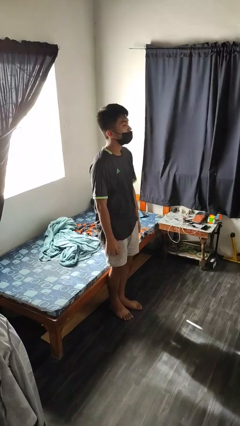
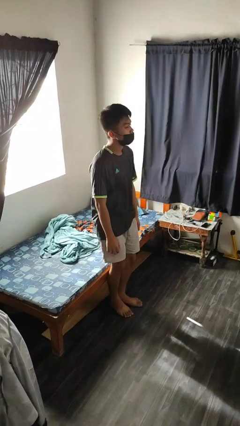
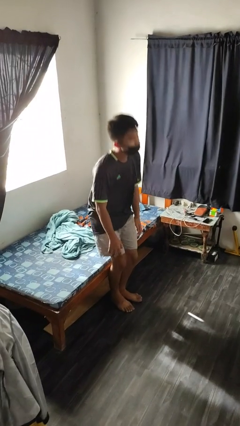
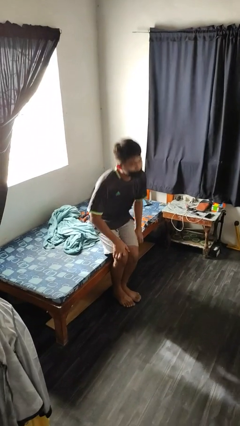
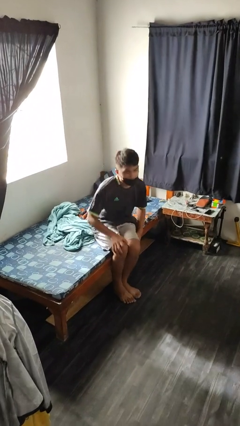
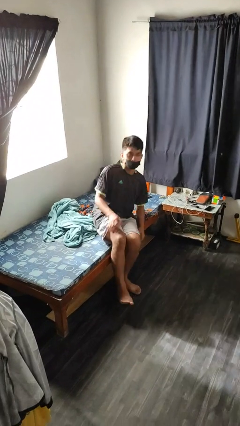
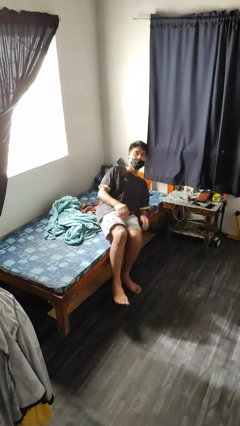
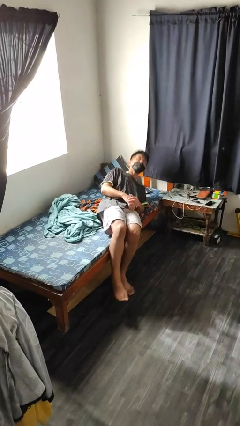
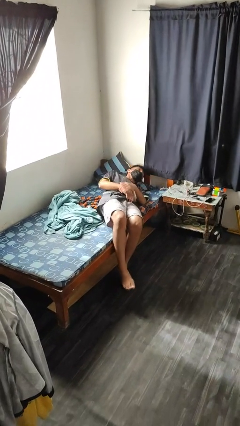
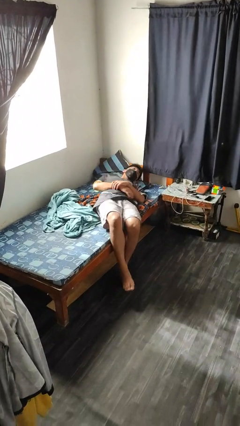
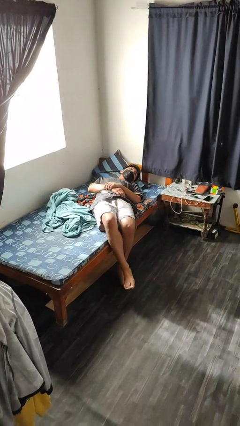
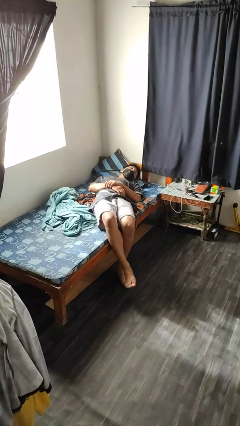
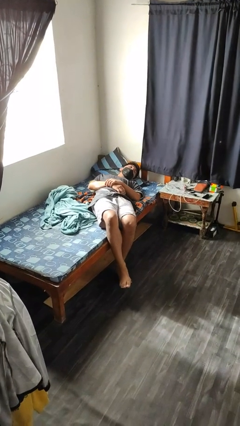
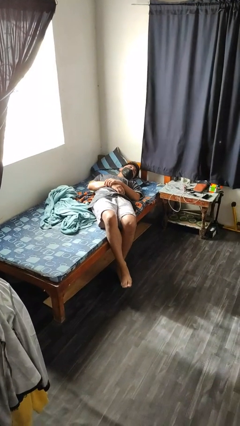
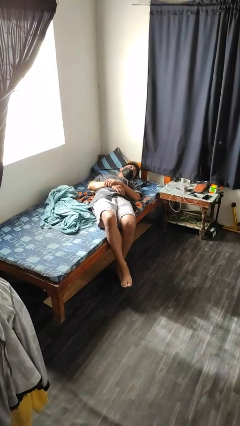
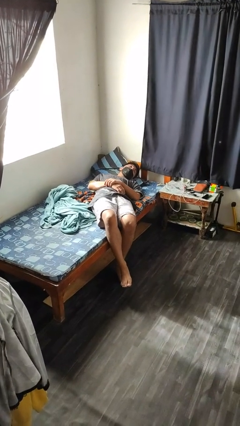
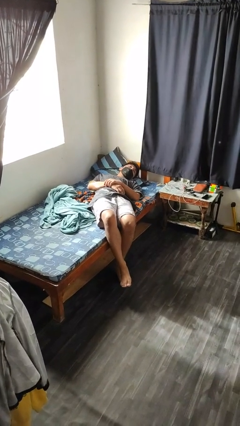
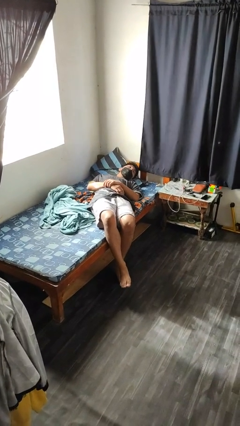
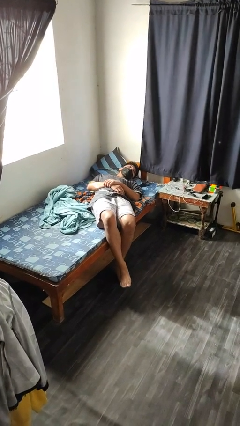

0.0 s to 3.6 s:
person lies down on bed

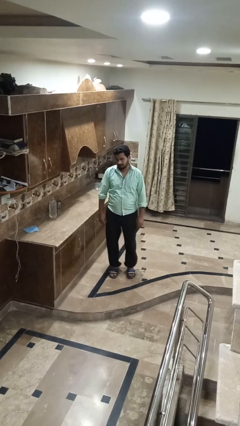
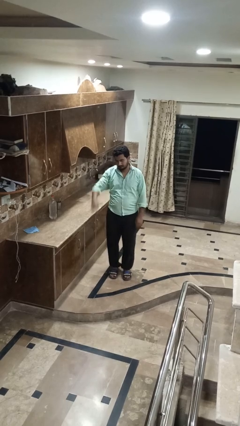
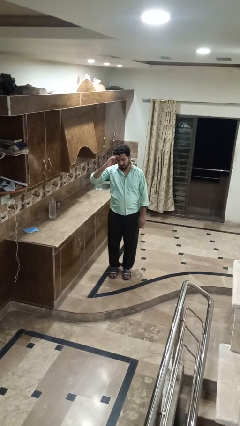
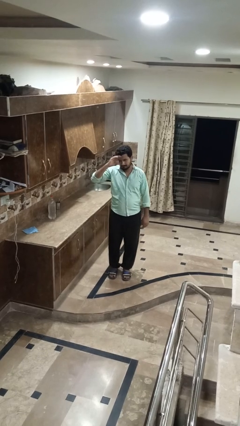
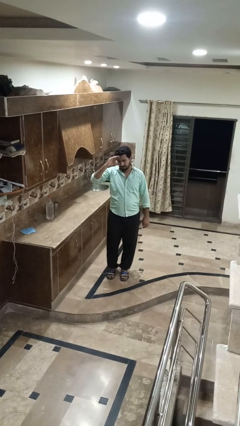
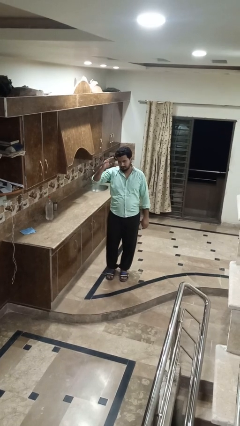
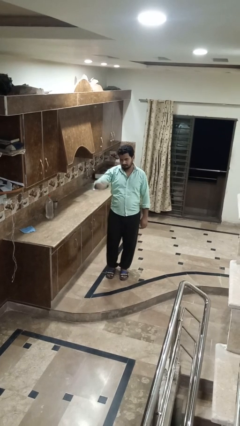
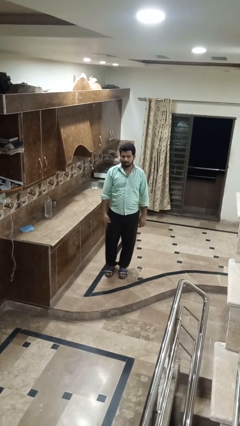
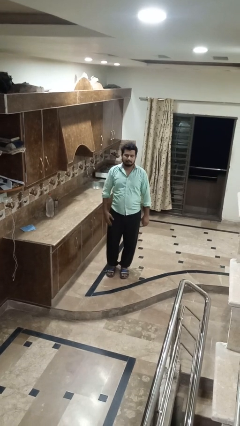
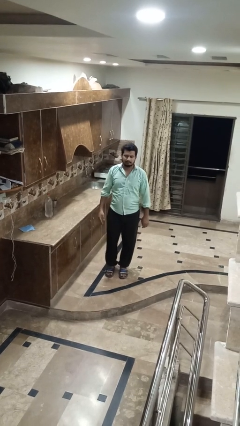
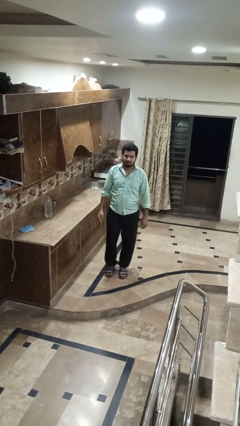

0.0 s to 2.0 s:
person salutes

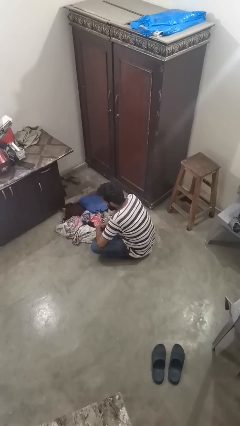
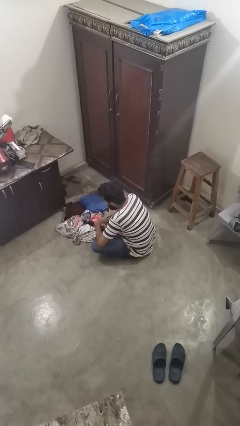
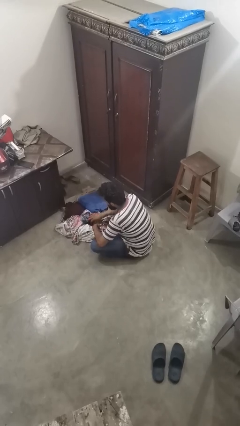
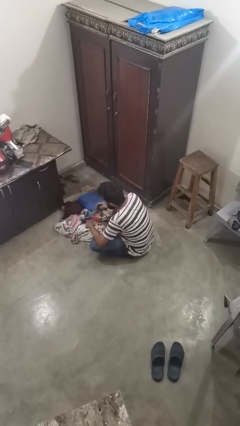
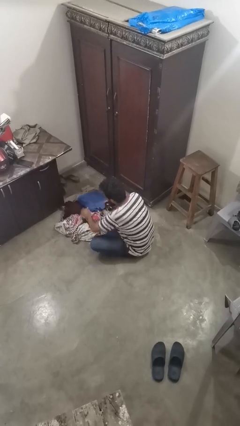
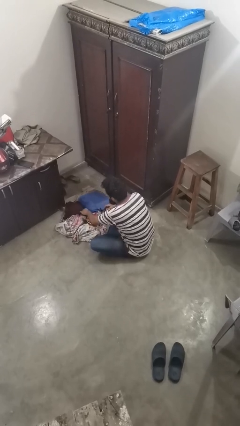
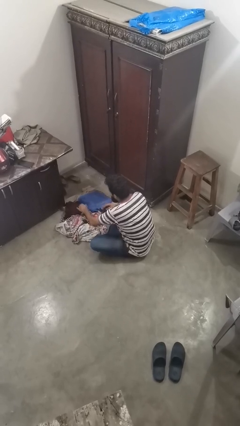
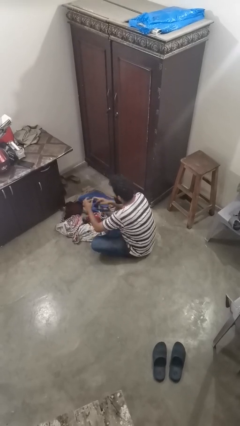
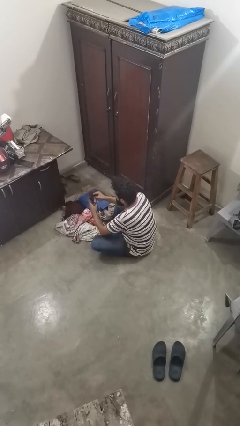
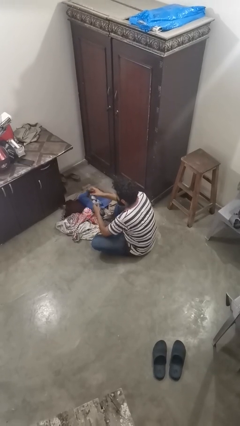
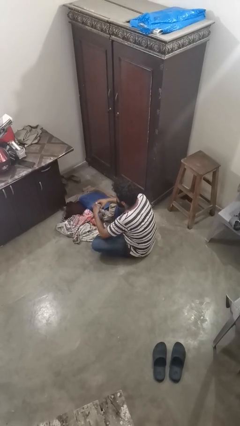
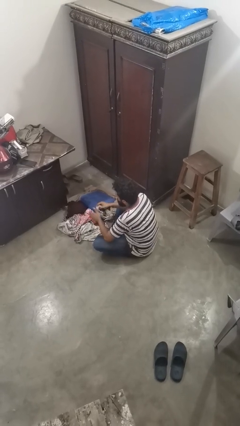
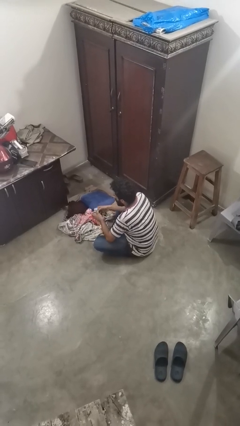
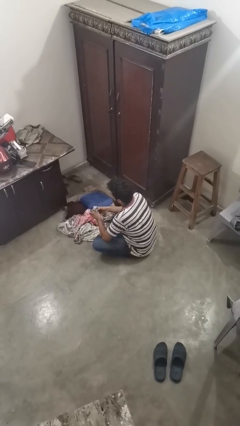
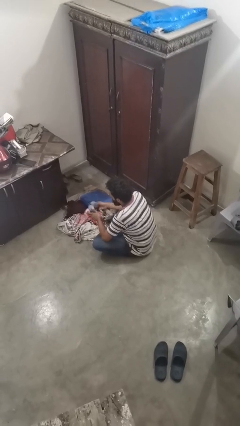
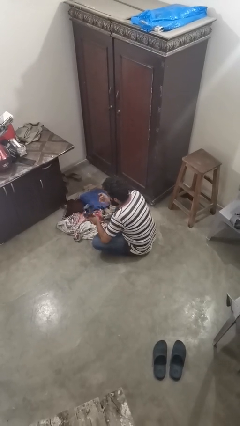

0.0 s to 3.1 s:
person folds socks

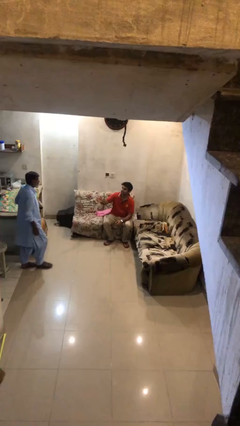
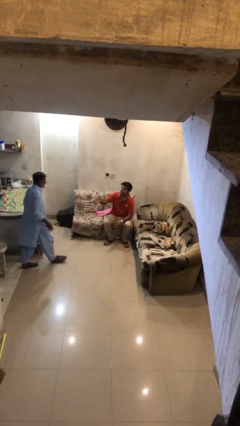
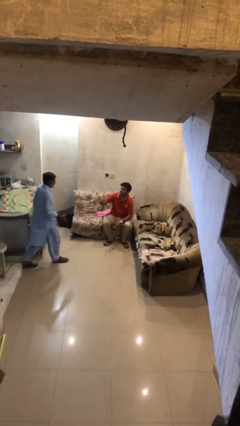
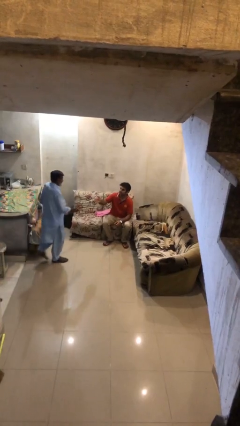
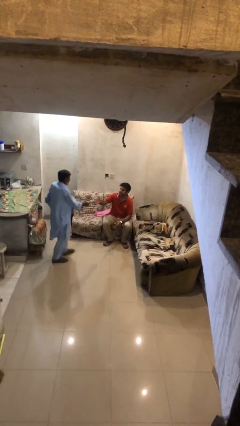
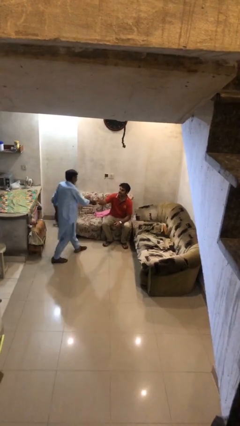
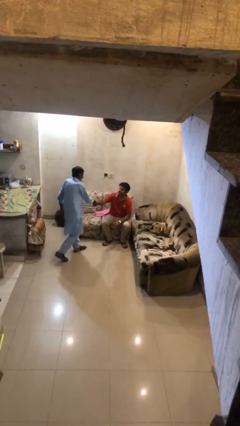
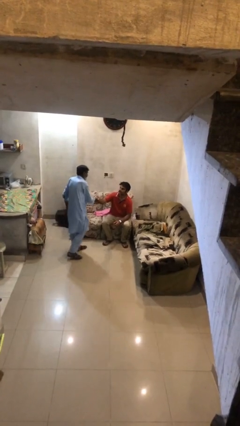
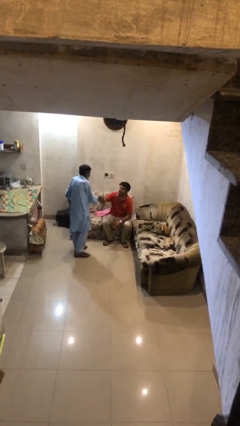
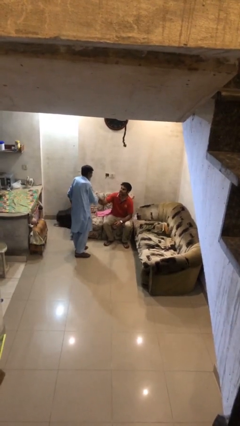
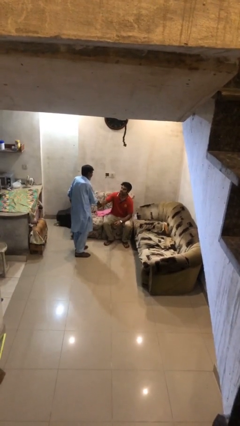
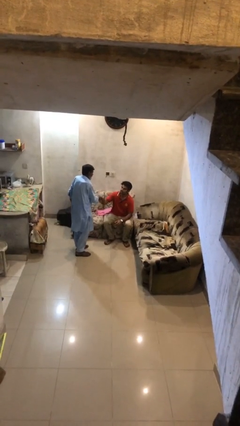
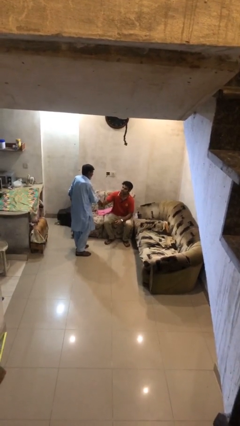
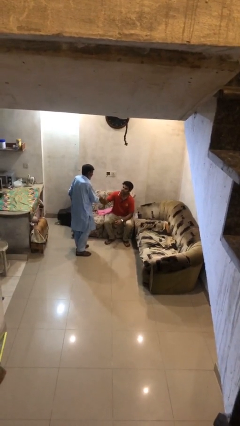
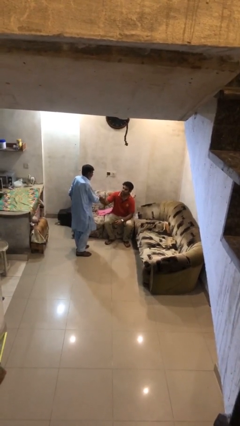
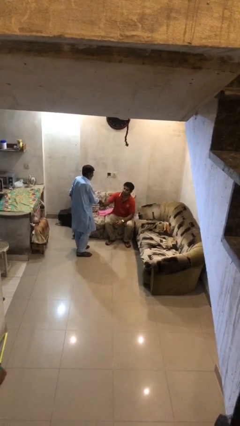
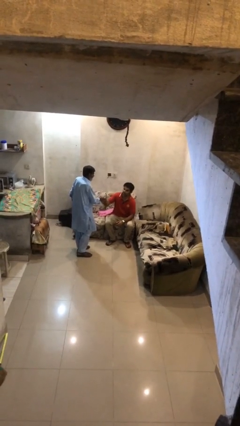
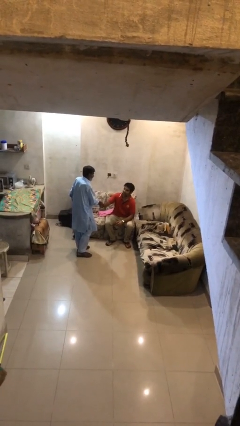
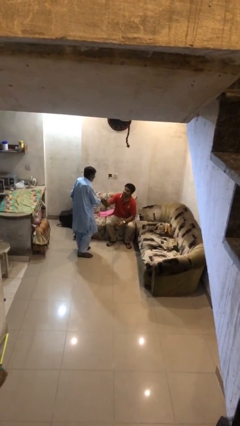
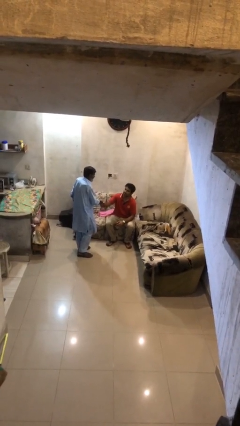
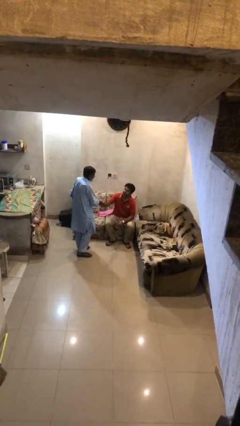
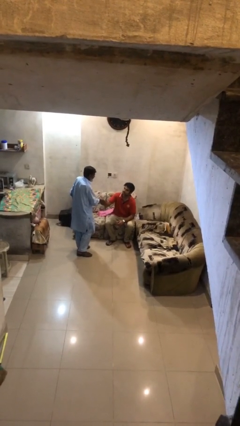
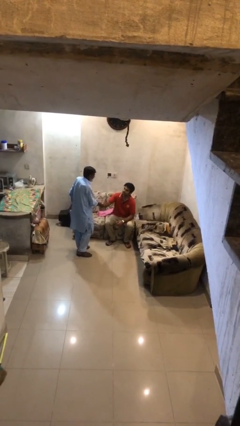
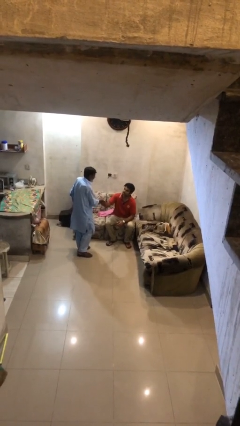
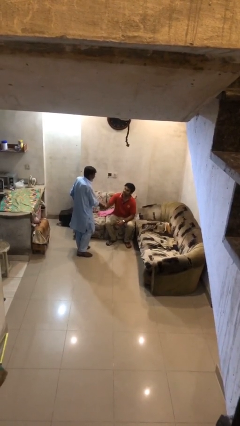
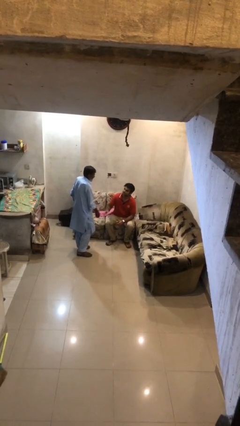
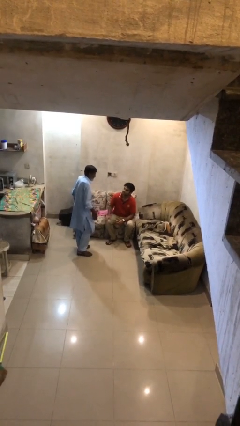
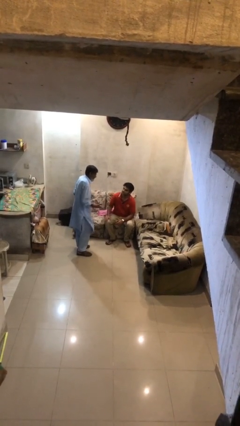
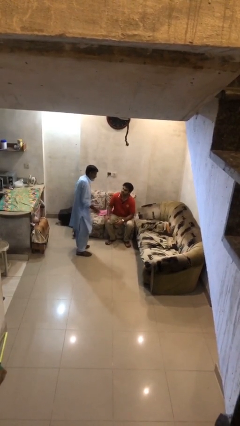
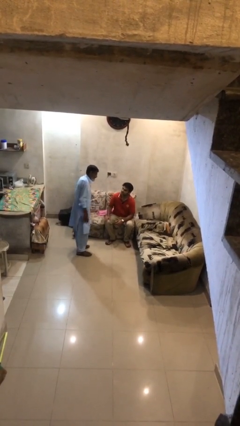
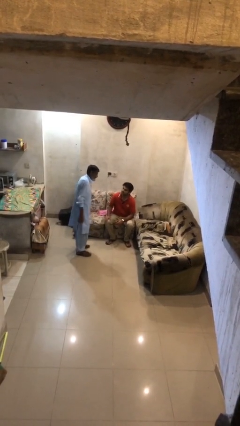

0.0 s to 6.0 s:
person shakes hand

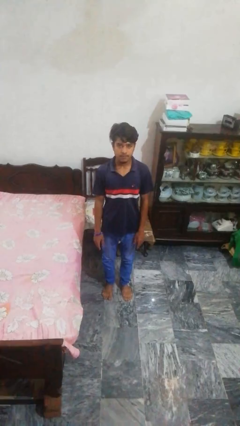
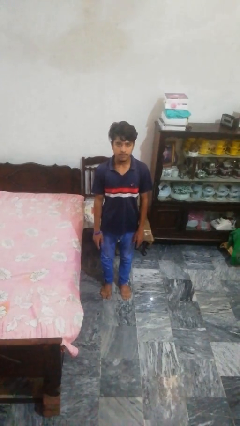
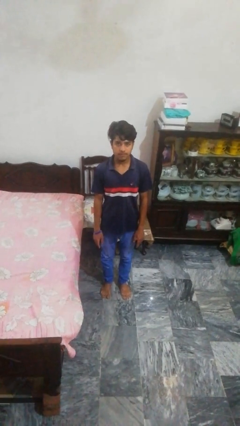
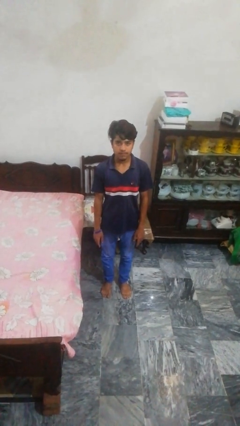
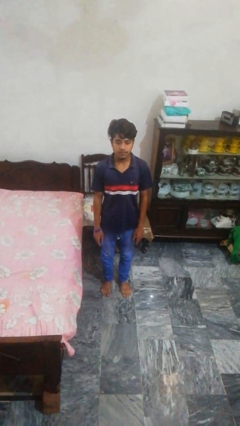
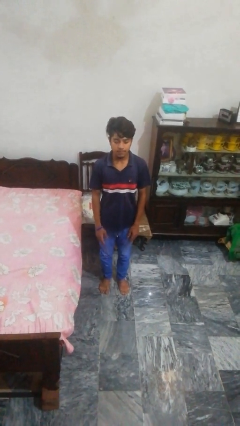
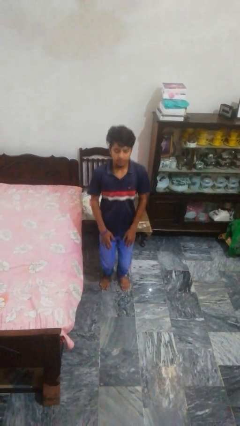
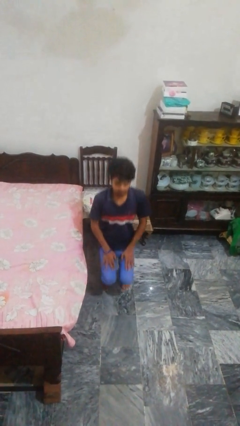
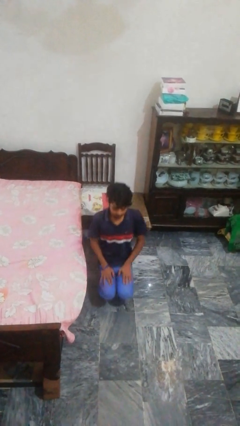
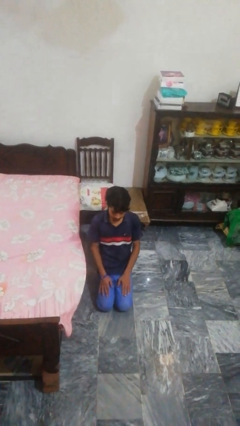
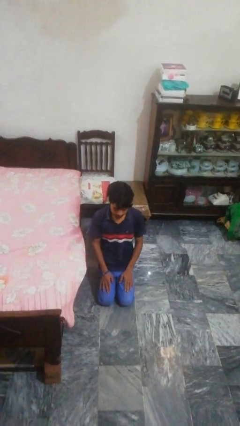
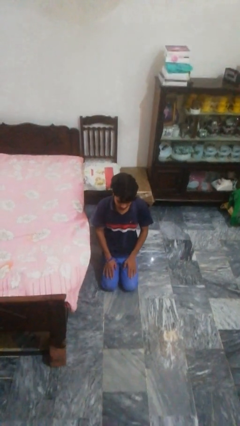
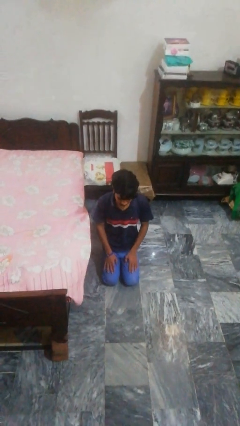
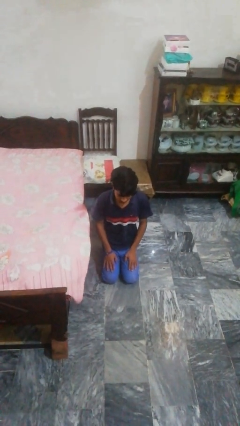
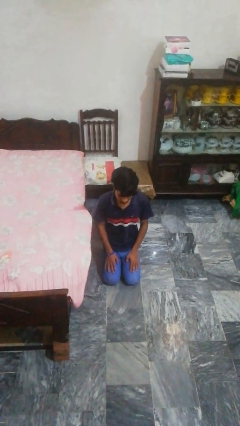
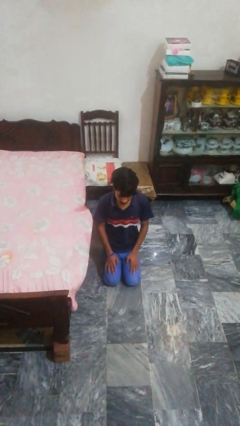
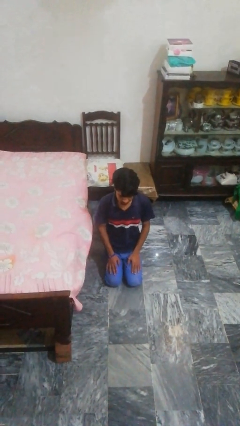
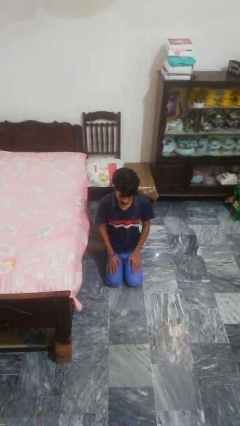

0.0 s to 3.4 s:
person kneels
